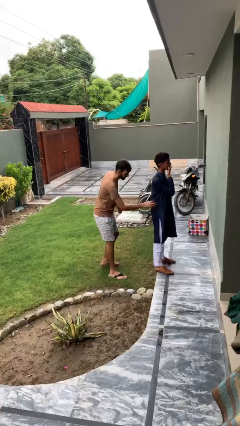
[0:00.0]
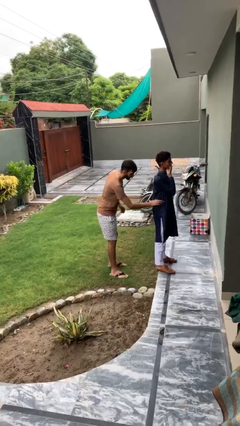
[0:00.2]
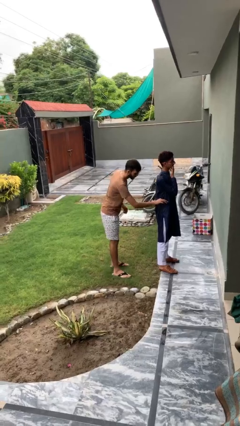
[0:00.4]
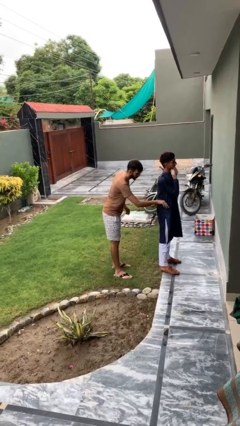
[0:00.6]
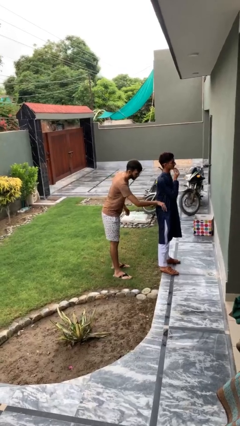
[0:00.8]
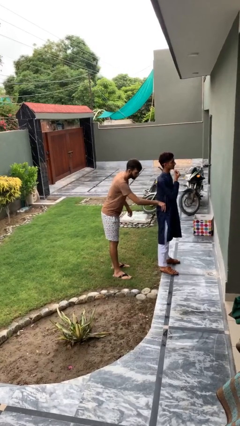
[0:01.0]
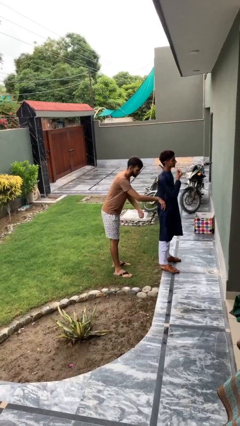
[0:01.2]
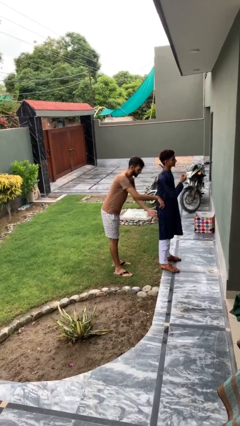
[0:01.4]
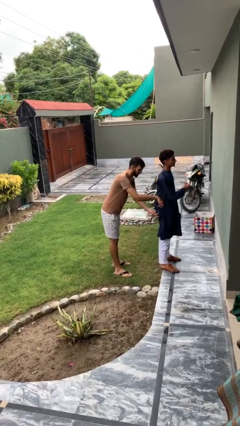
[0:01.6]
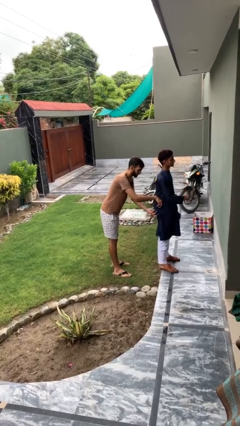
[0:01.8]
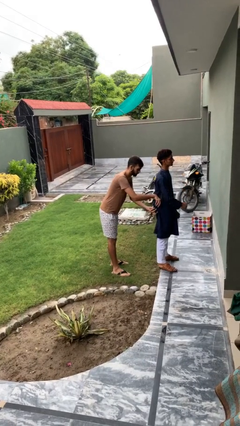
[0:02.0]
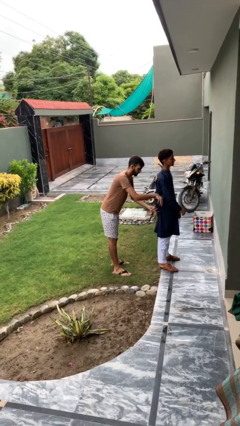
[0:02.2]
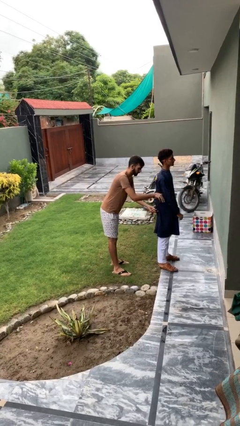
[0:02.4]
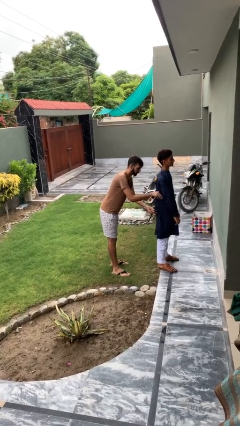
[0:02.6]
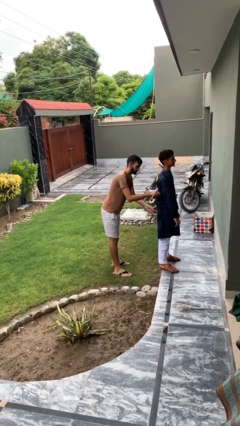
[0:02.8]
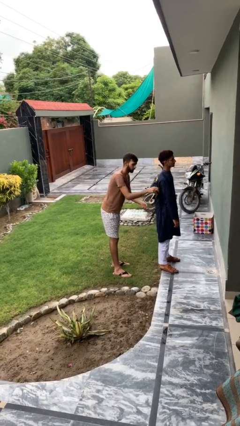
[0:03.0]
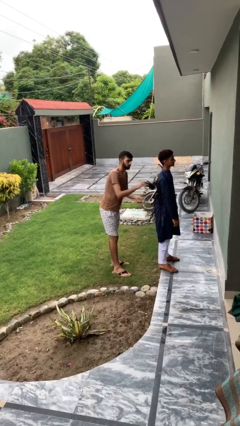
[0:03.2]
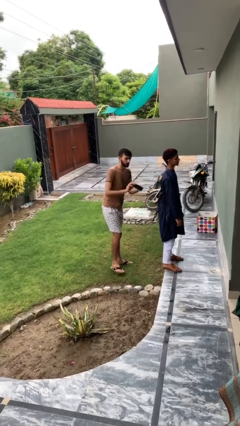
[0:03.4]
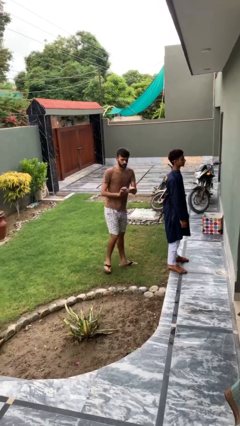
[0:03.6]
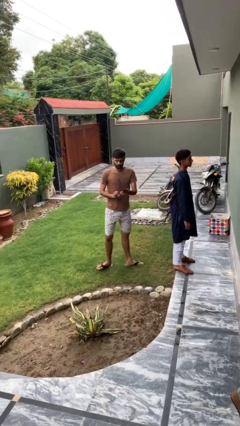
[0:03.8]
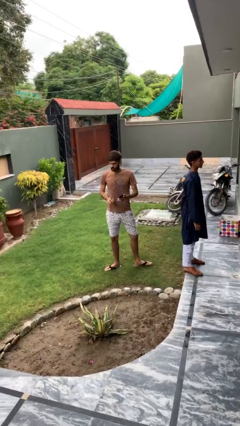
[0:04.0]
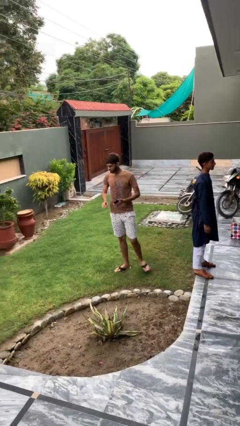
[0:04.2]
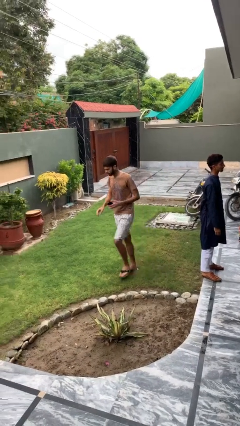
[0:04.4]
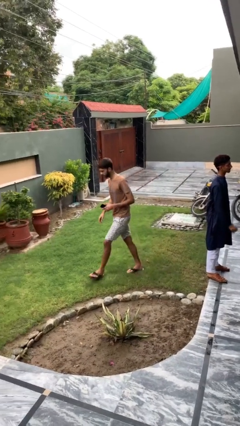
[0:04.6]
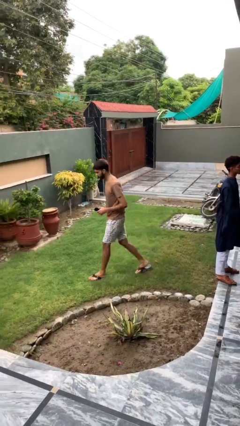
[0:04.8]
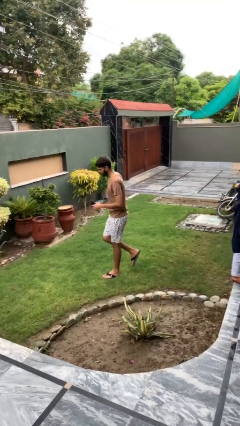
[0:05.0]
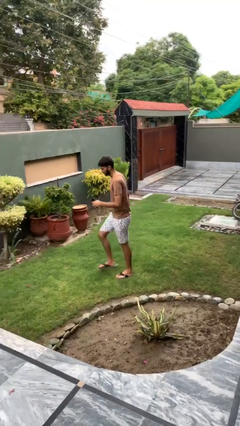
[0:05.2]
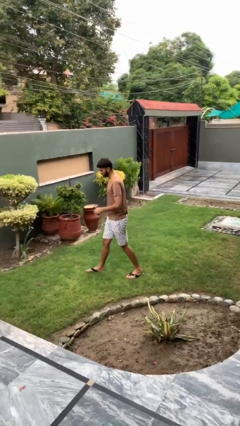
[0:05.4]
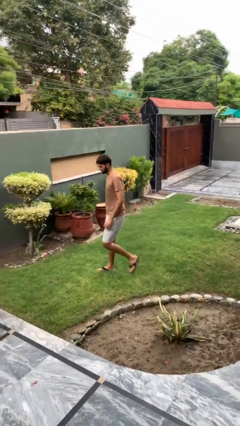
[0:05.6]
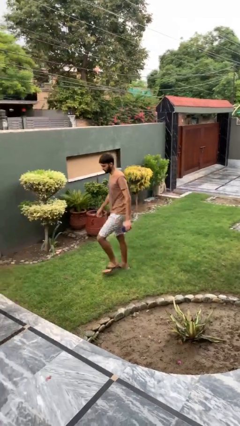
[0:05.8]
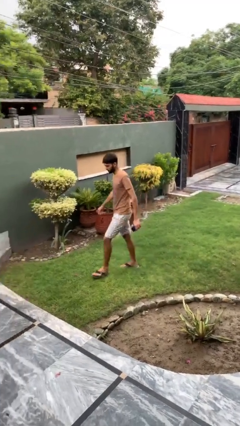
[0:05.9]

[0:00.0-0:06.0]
person steals object from person

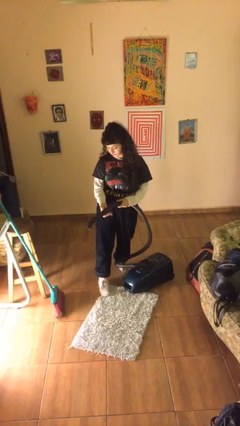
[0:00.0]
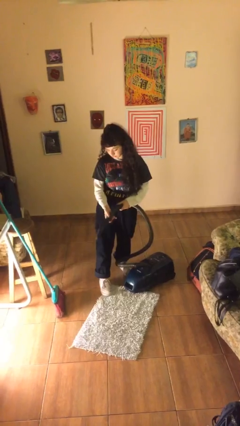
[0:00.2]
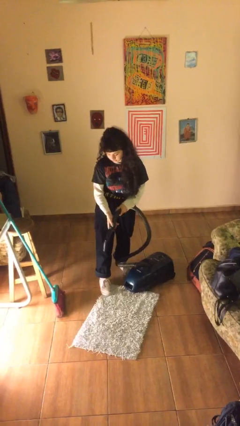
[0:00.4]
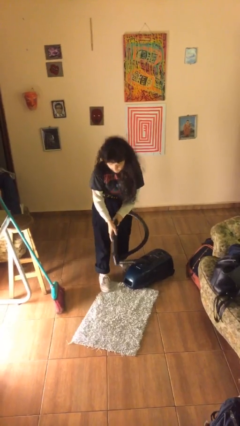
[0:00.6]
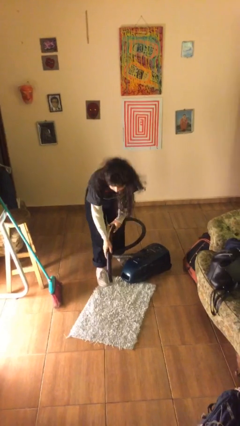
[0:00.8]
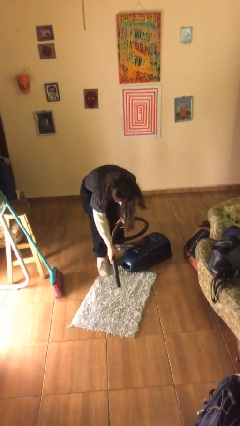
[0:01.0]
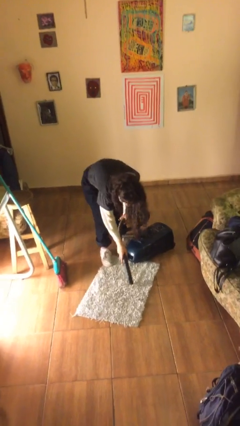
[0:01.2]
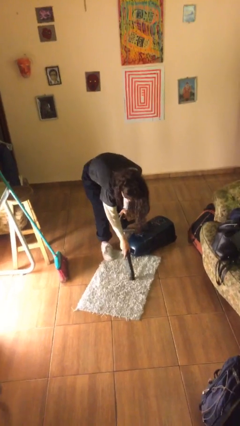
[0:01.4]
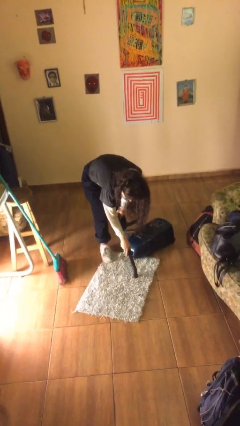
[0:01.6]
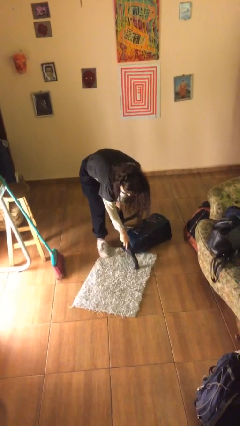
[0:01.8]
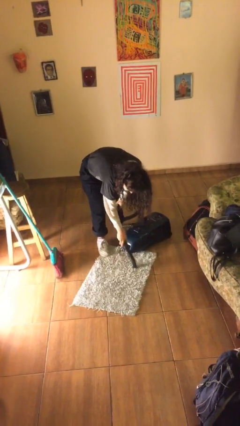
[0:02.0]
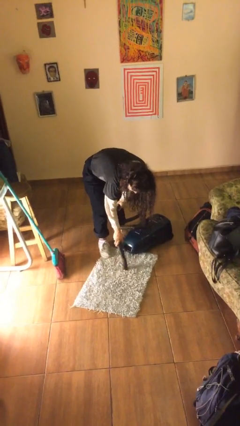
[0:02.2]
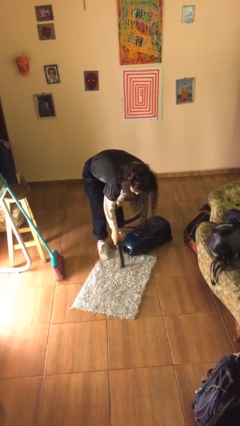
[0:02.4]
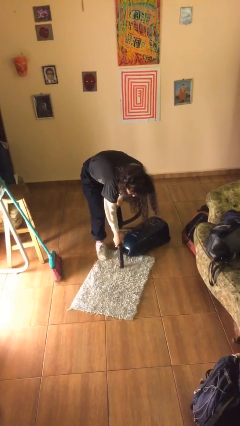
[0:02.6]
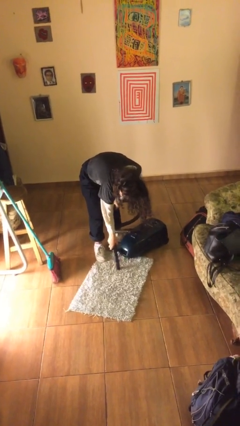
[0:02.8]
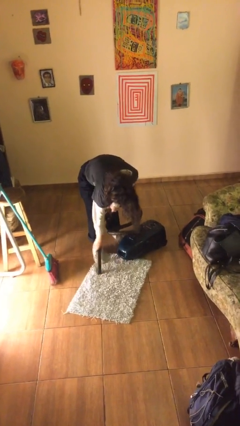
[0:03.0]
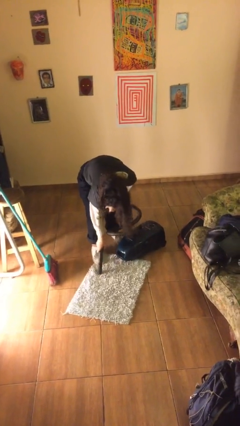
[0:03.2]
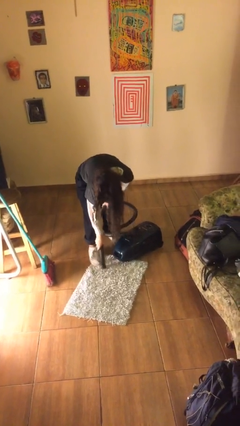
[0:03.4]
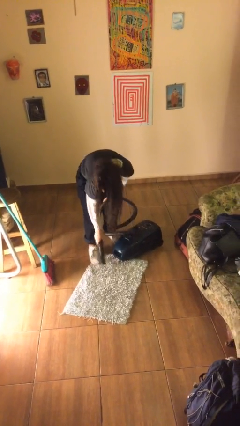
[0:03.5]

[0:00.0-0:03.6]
person vacuums carpet

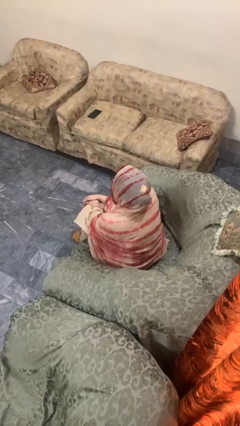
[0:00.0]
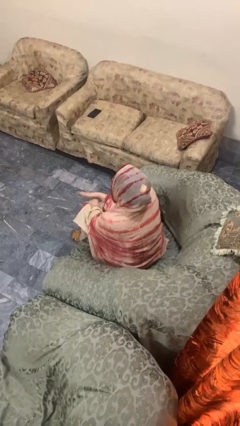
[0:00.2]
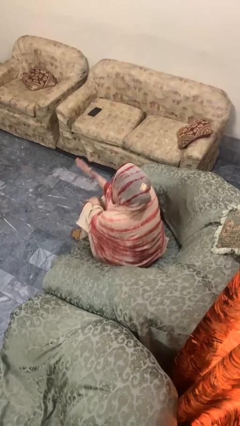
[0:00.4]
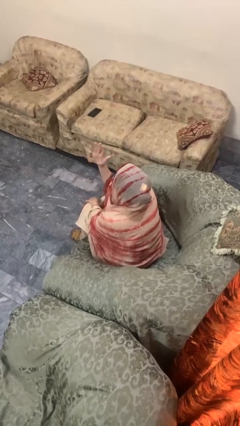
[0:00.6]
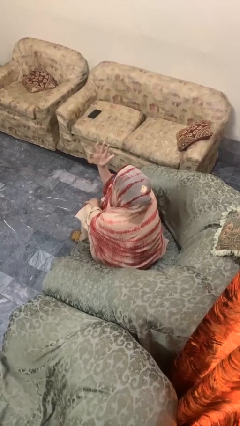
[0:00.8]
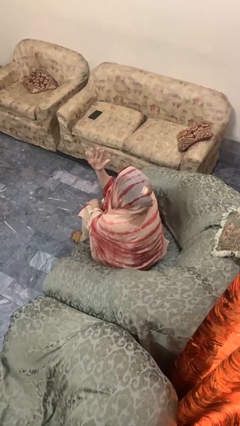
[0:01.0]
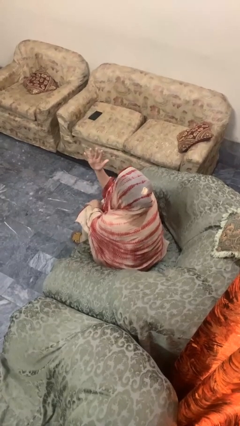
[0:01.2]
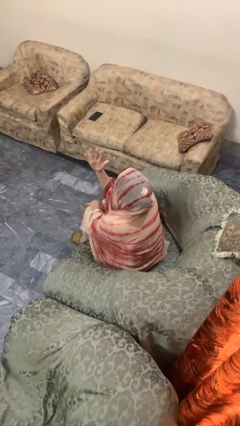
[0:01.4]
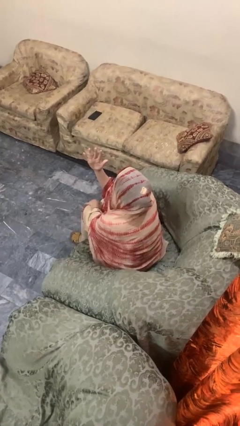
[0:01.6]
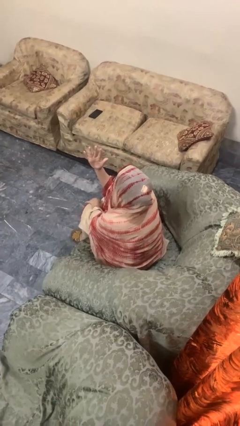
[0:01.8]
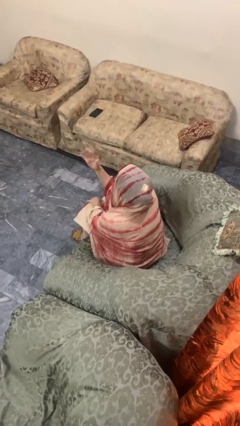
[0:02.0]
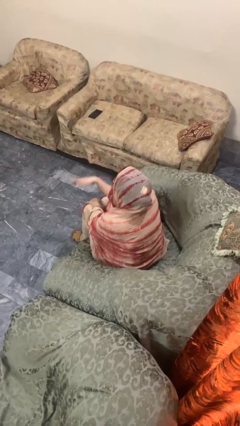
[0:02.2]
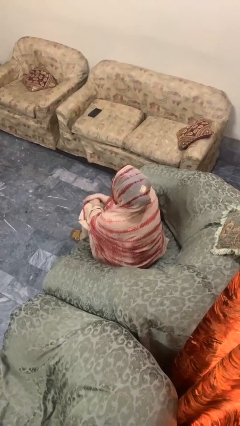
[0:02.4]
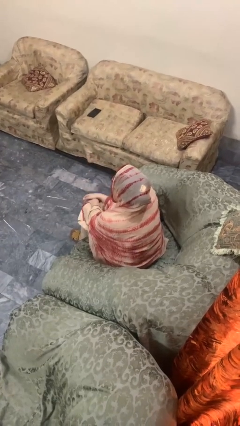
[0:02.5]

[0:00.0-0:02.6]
person gestures number five

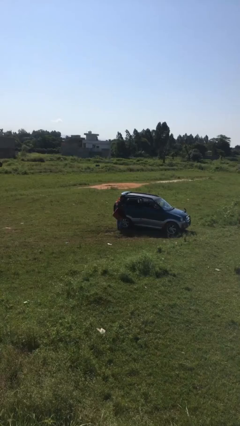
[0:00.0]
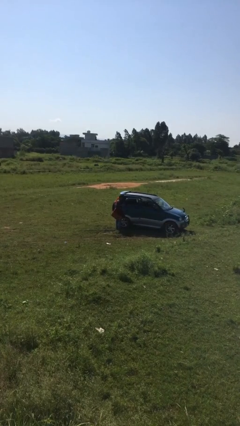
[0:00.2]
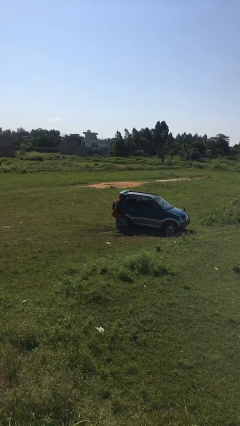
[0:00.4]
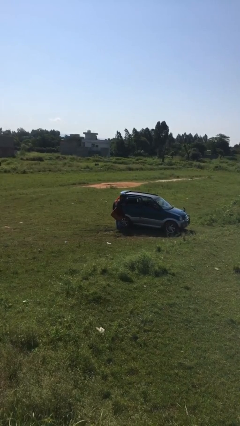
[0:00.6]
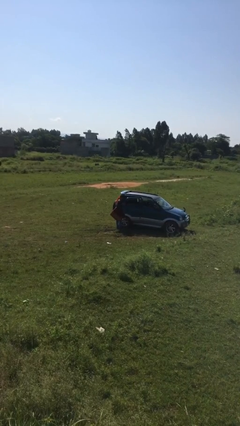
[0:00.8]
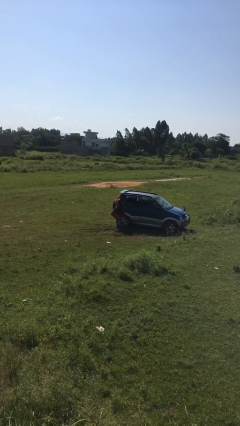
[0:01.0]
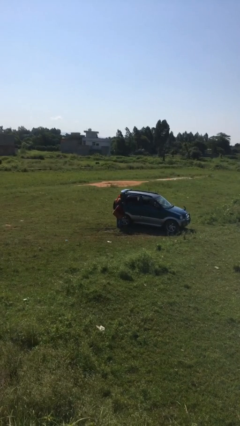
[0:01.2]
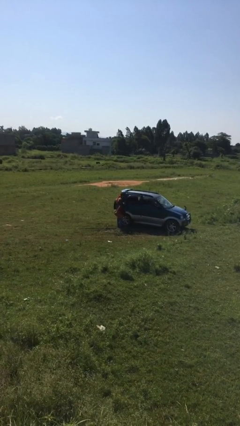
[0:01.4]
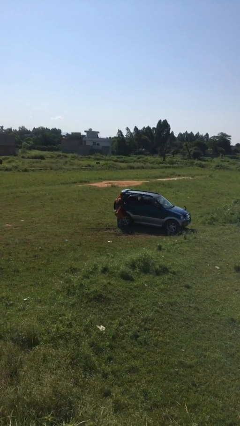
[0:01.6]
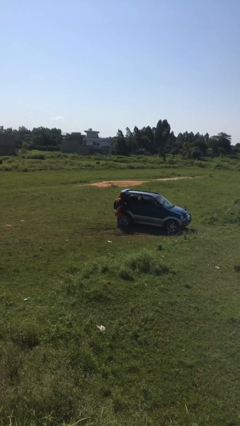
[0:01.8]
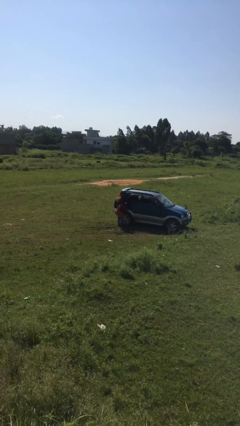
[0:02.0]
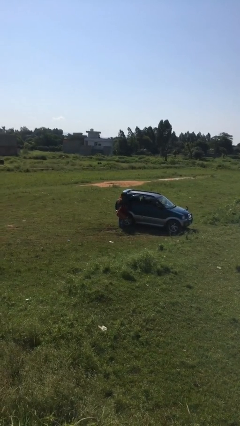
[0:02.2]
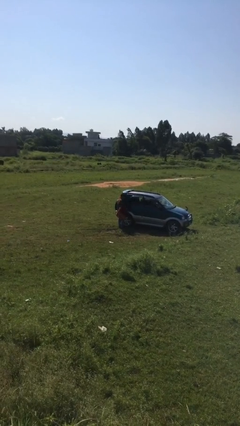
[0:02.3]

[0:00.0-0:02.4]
person closes car door

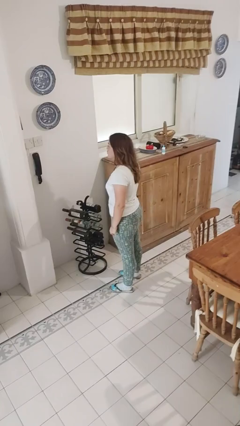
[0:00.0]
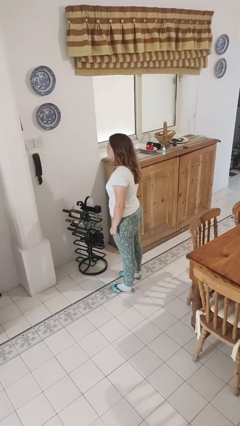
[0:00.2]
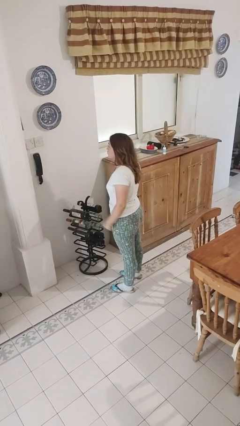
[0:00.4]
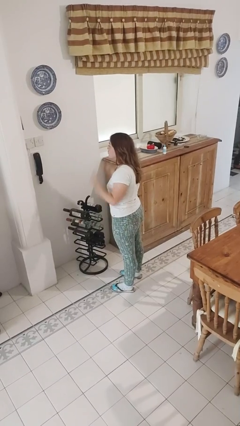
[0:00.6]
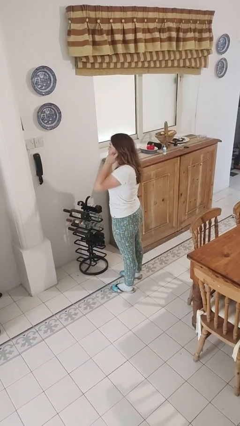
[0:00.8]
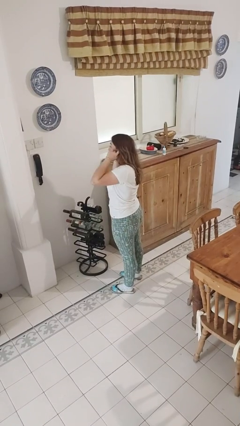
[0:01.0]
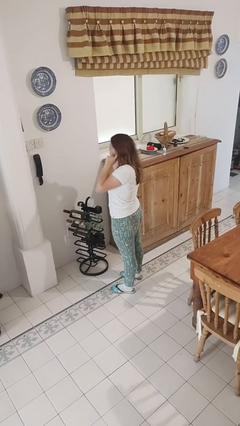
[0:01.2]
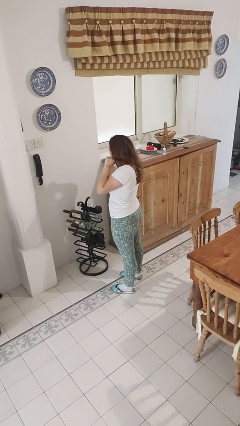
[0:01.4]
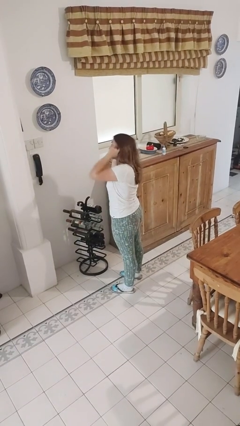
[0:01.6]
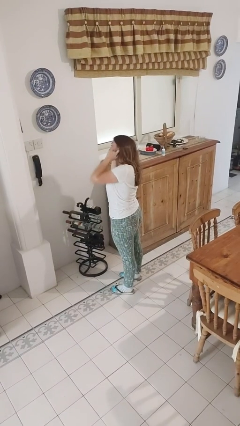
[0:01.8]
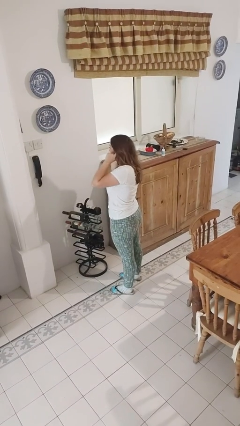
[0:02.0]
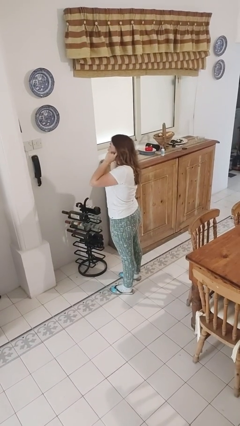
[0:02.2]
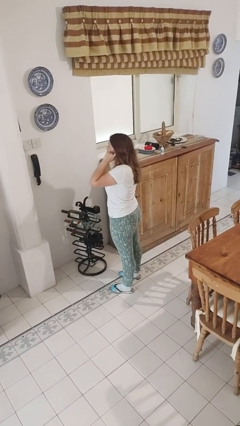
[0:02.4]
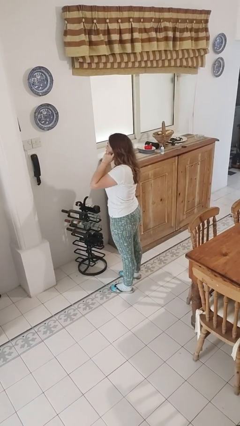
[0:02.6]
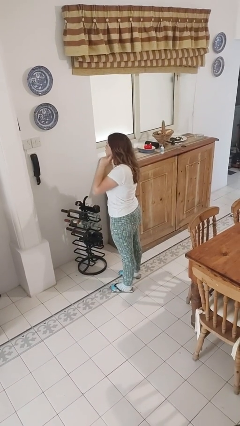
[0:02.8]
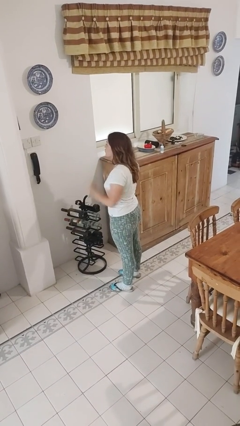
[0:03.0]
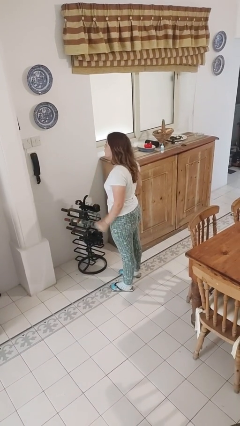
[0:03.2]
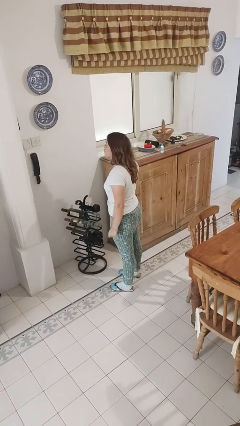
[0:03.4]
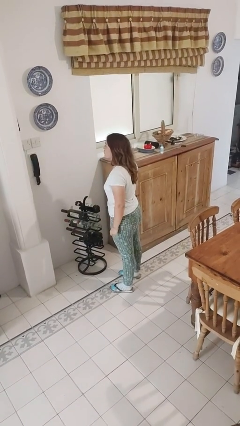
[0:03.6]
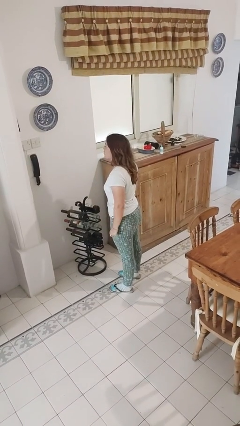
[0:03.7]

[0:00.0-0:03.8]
person puts fingers in ear
